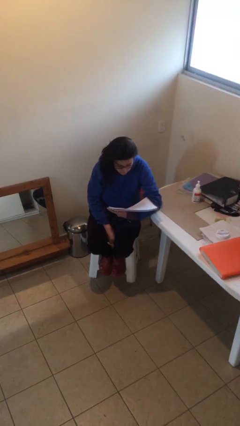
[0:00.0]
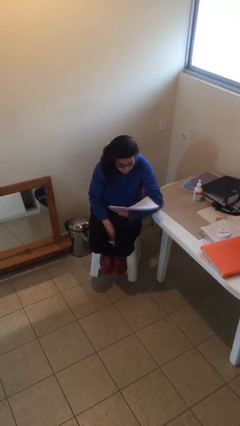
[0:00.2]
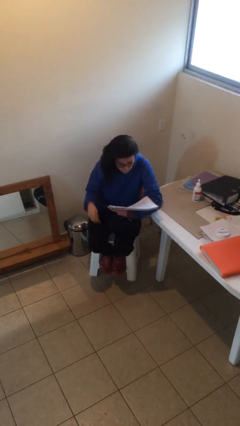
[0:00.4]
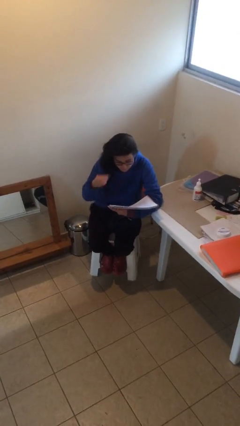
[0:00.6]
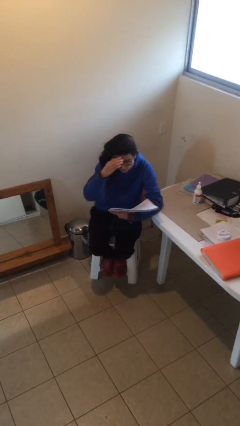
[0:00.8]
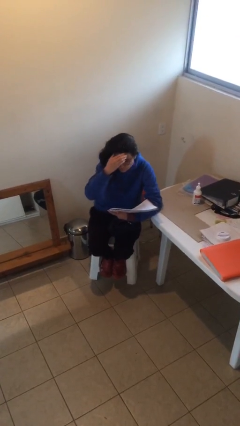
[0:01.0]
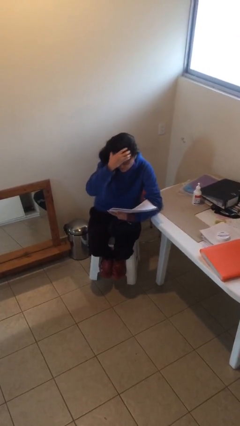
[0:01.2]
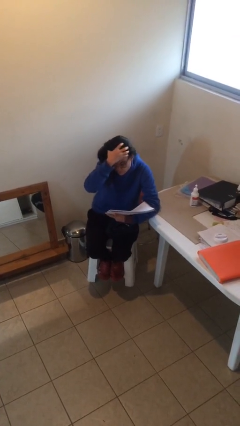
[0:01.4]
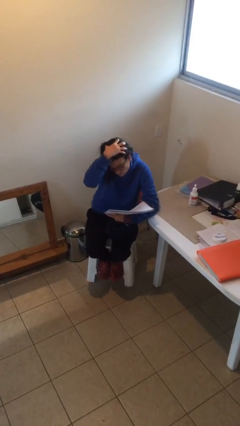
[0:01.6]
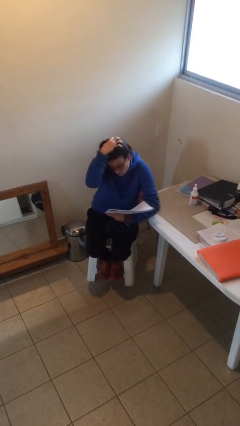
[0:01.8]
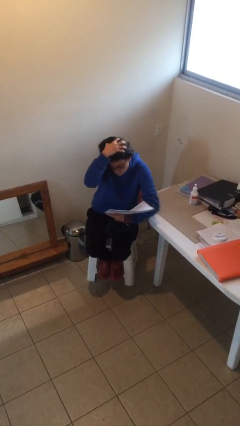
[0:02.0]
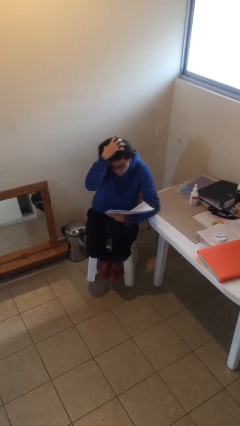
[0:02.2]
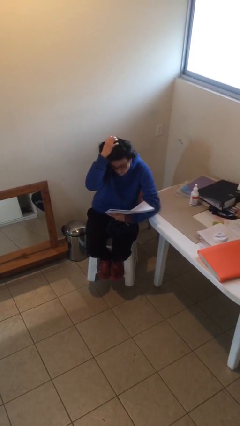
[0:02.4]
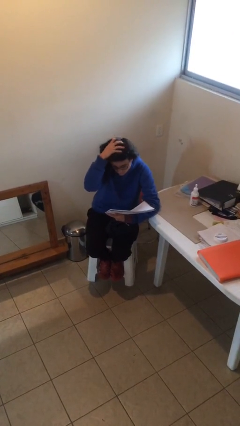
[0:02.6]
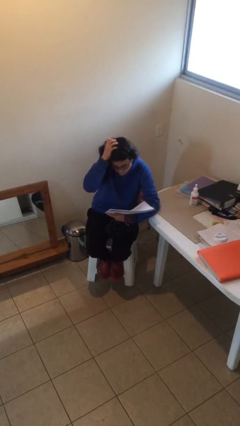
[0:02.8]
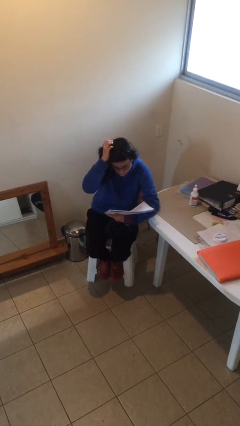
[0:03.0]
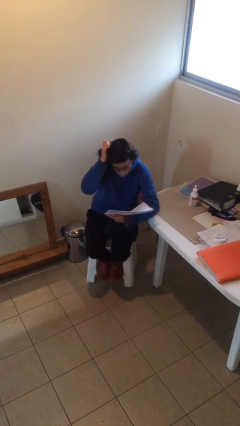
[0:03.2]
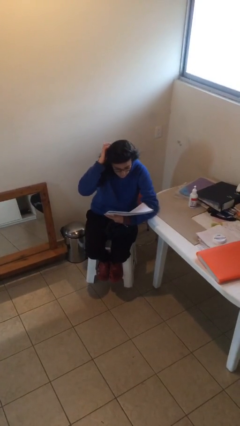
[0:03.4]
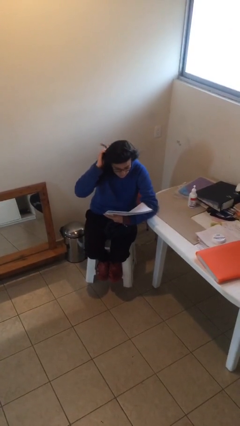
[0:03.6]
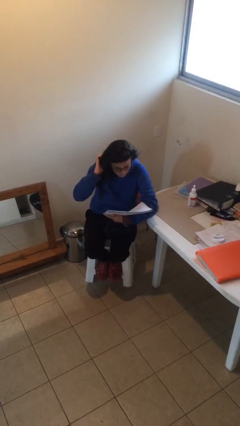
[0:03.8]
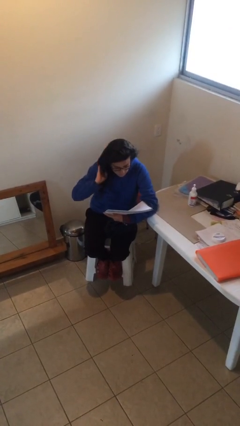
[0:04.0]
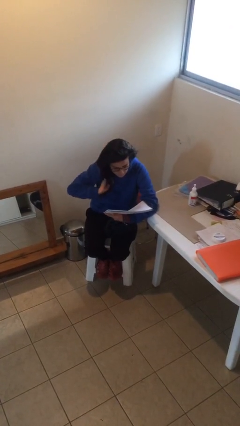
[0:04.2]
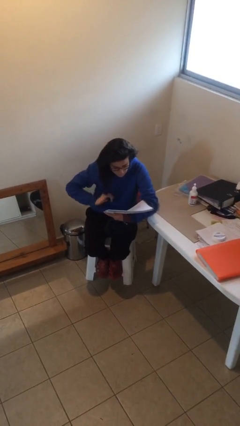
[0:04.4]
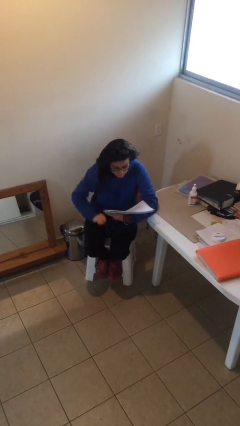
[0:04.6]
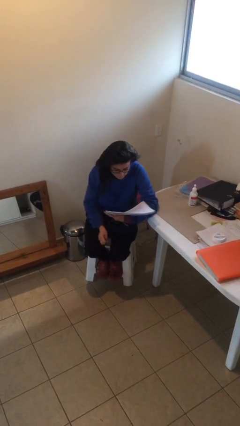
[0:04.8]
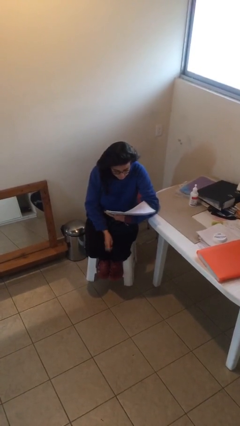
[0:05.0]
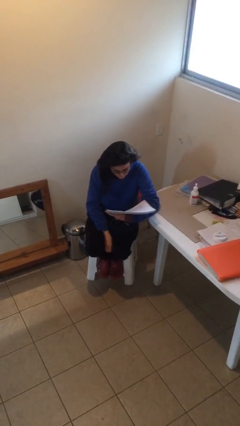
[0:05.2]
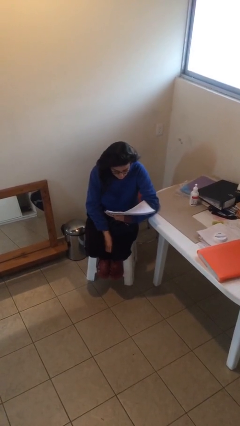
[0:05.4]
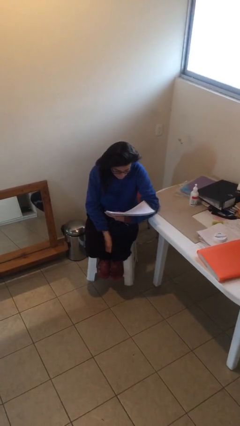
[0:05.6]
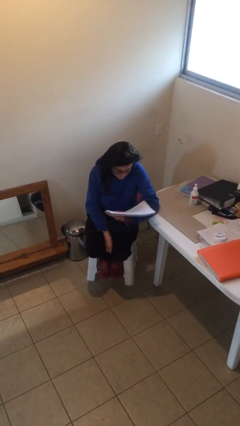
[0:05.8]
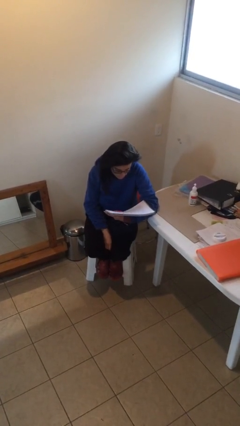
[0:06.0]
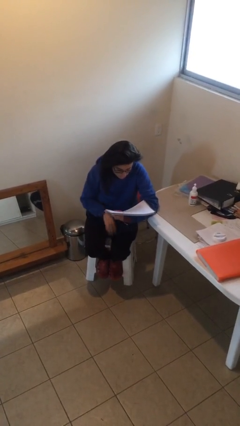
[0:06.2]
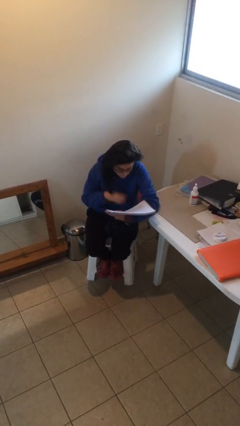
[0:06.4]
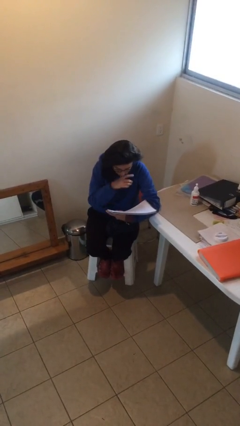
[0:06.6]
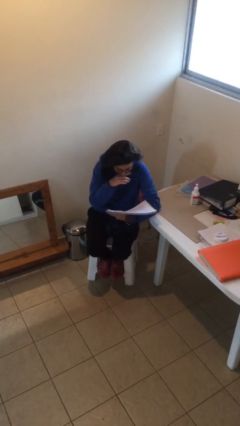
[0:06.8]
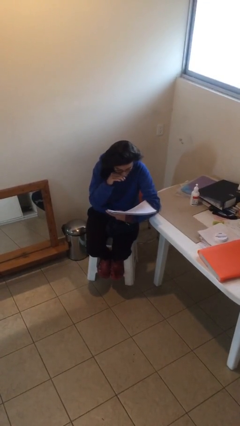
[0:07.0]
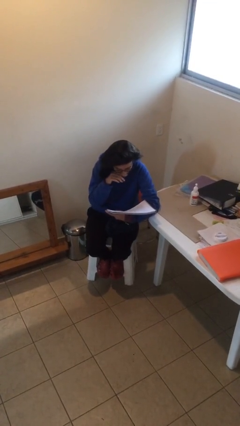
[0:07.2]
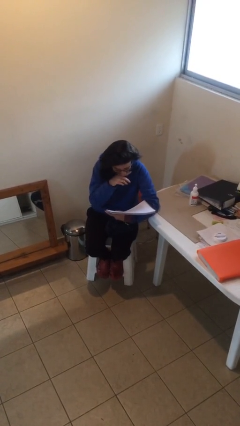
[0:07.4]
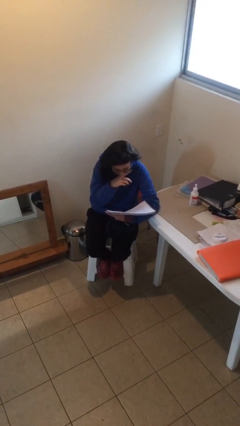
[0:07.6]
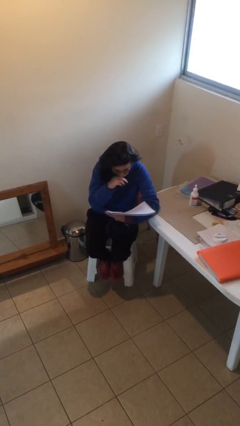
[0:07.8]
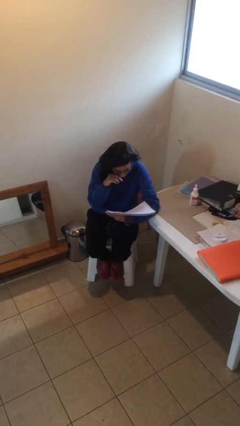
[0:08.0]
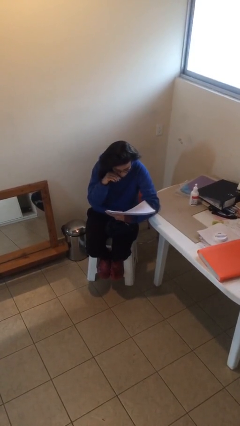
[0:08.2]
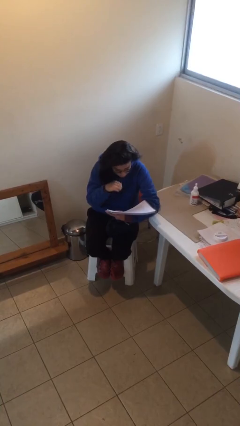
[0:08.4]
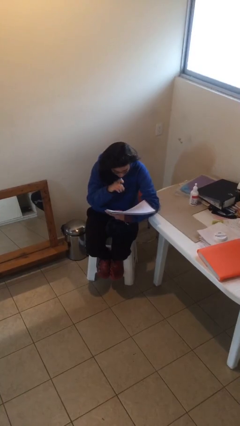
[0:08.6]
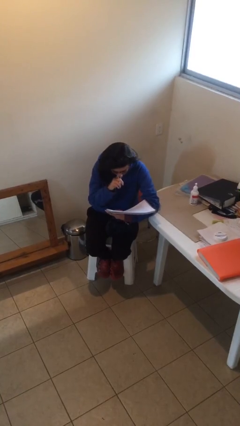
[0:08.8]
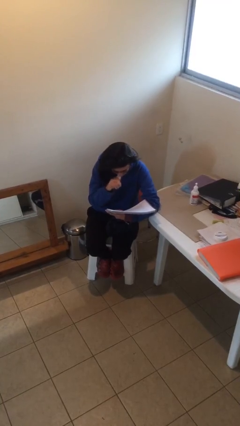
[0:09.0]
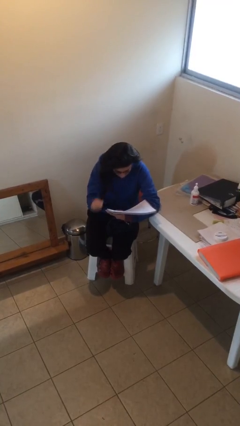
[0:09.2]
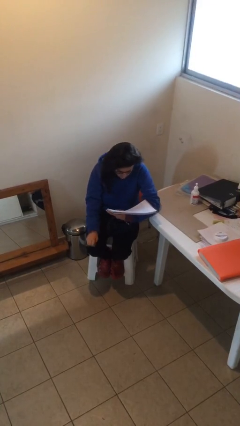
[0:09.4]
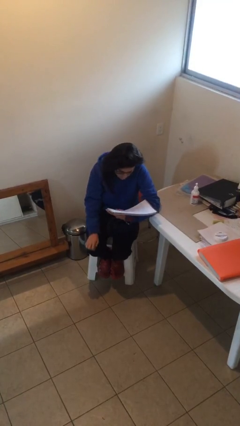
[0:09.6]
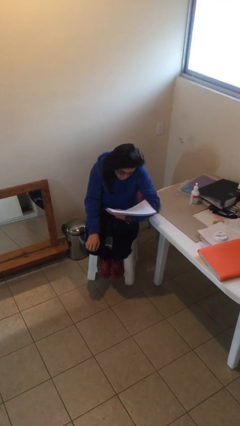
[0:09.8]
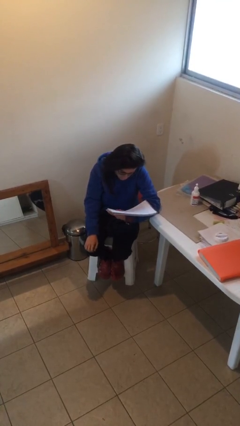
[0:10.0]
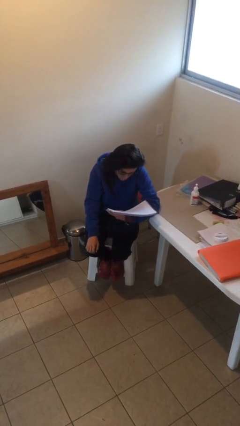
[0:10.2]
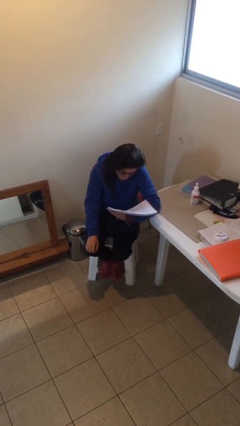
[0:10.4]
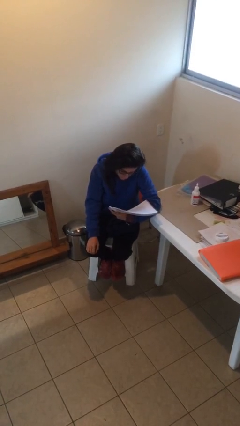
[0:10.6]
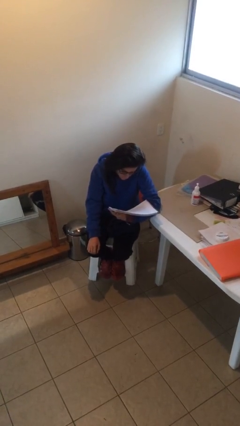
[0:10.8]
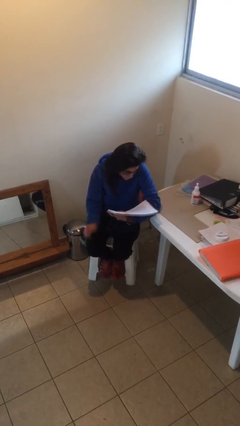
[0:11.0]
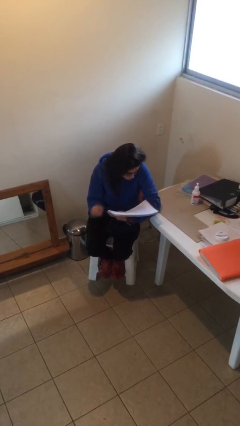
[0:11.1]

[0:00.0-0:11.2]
person reads document

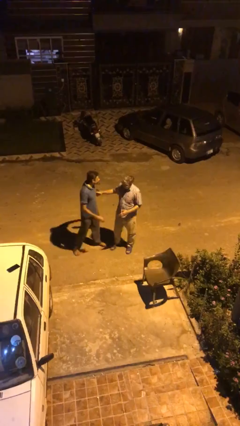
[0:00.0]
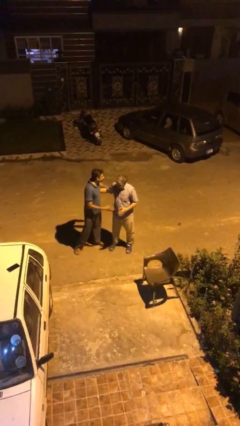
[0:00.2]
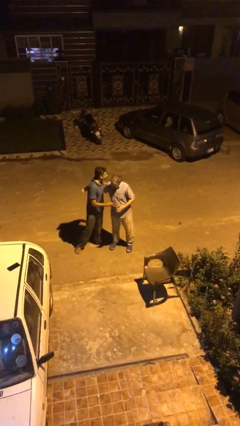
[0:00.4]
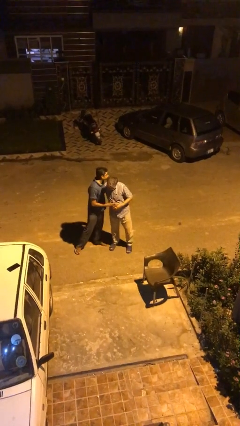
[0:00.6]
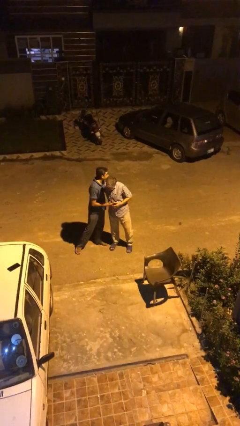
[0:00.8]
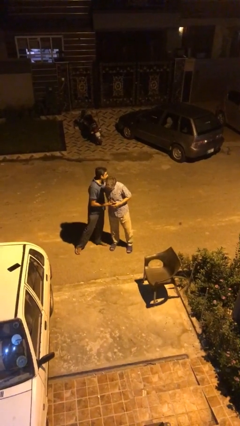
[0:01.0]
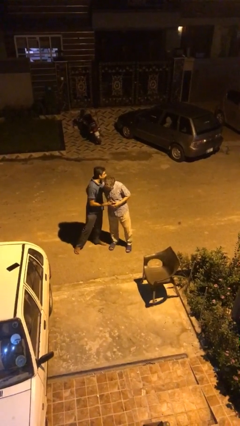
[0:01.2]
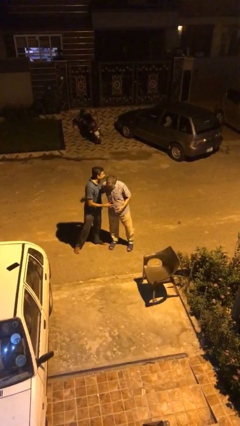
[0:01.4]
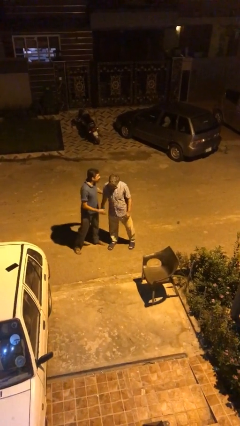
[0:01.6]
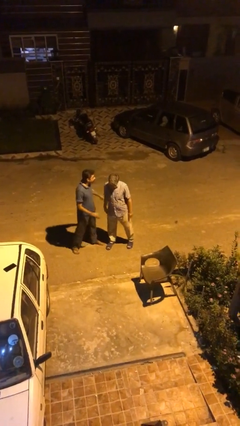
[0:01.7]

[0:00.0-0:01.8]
person embraces person

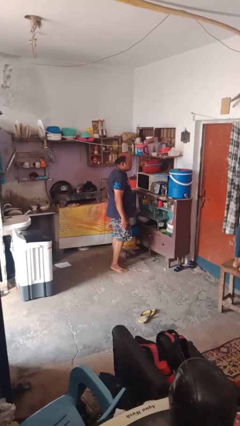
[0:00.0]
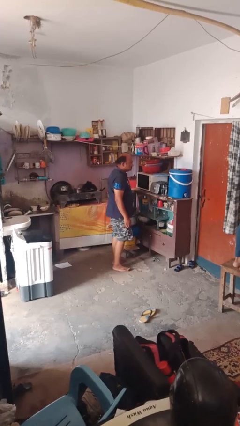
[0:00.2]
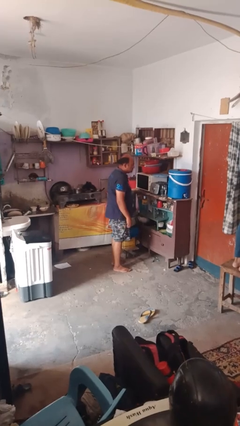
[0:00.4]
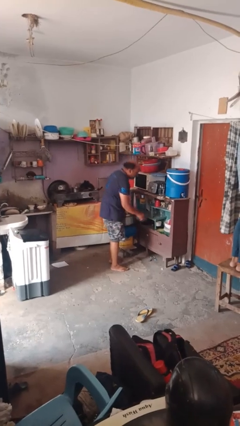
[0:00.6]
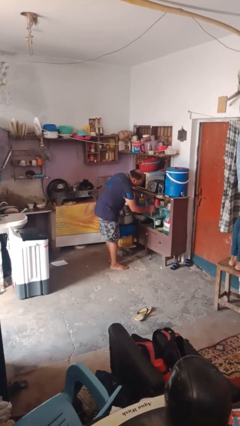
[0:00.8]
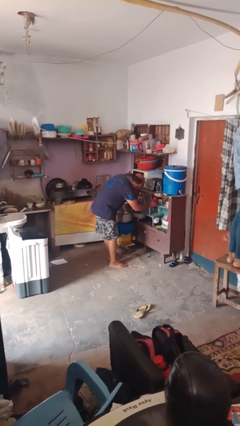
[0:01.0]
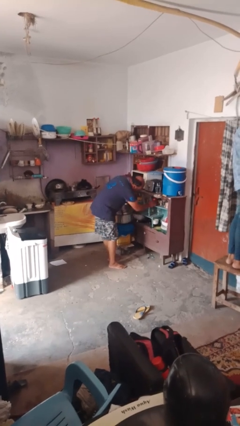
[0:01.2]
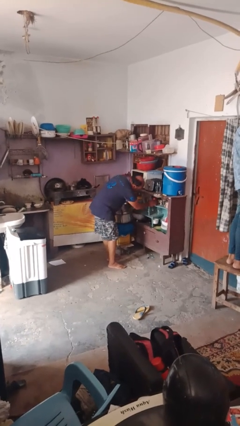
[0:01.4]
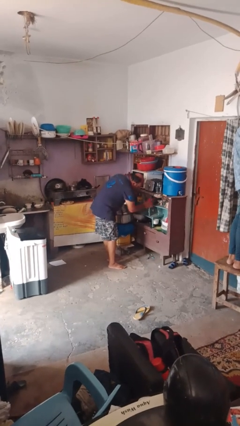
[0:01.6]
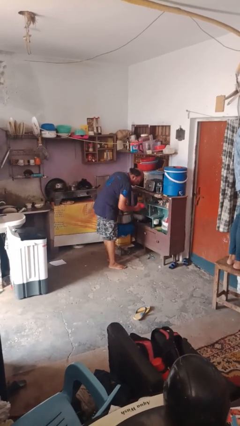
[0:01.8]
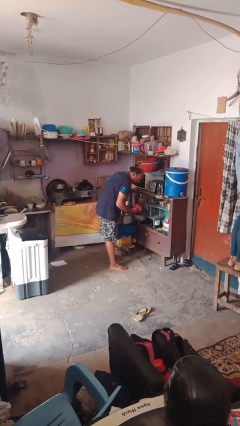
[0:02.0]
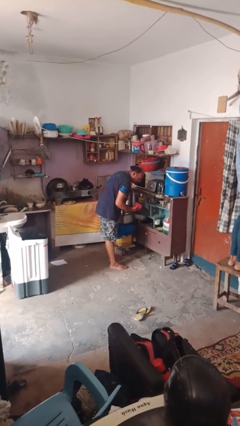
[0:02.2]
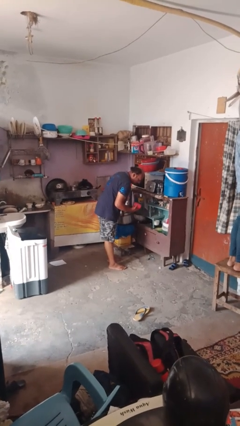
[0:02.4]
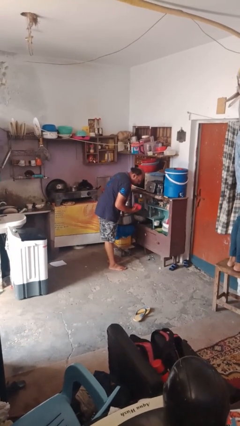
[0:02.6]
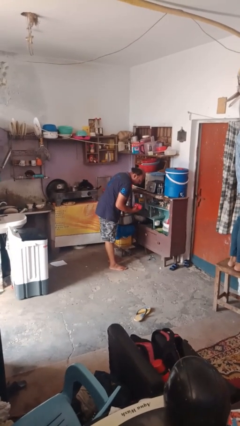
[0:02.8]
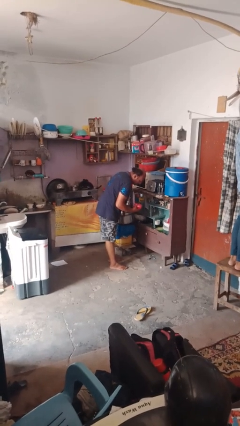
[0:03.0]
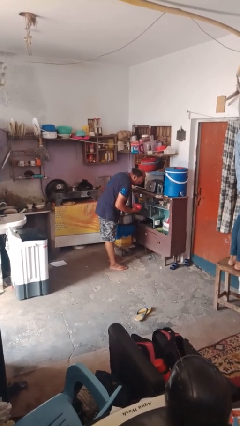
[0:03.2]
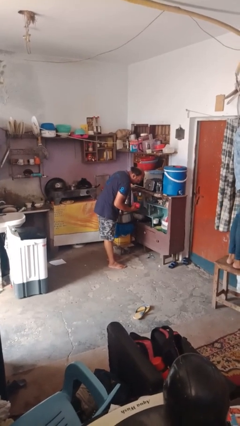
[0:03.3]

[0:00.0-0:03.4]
person takes object from kitchen drawer

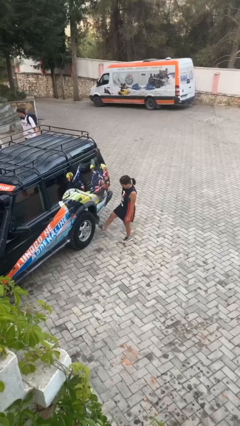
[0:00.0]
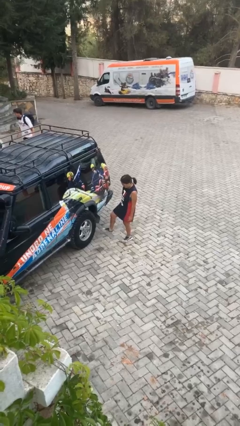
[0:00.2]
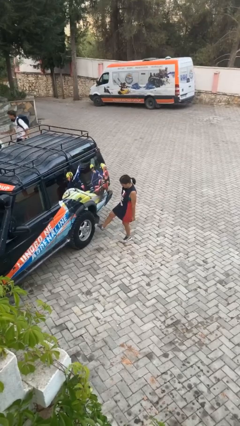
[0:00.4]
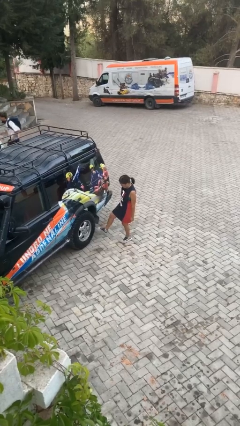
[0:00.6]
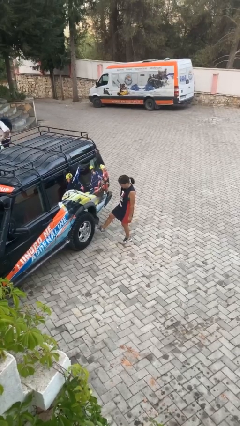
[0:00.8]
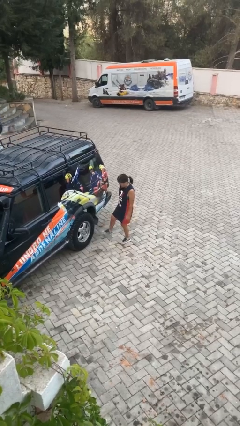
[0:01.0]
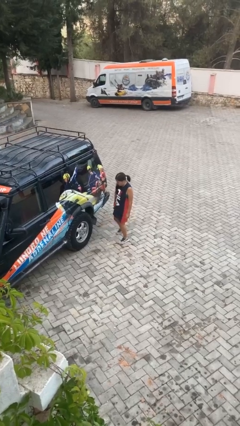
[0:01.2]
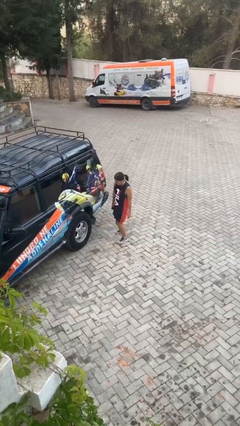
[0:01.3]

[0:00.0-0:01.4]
person kicks car tires

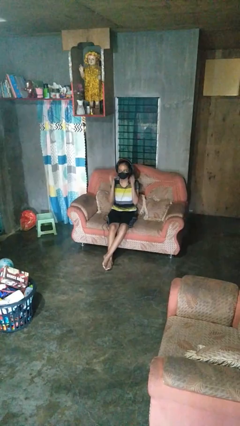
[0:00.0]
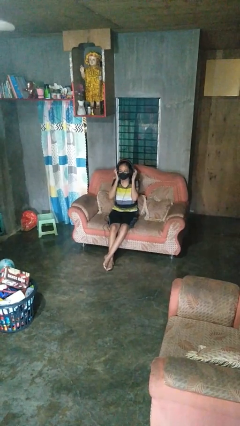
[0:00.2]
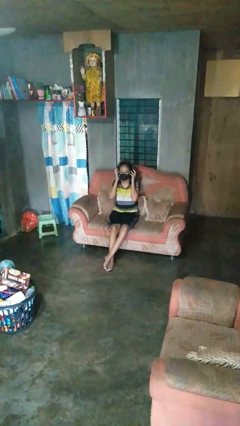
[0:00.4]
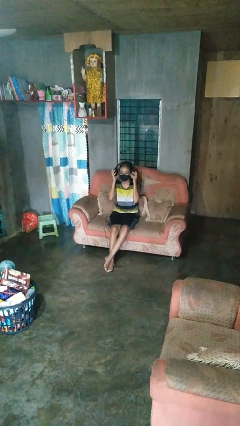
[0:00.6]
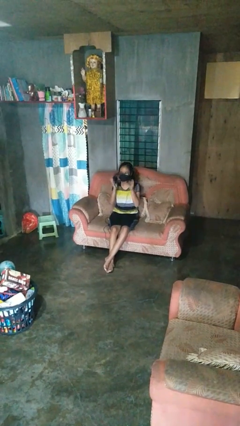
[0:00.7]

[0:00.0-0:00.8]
person takes off headphones
